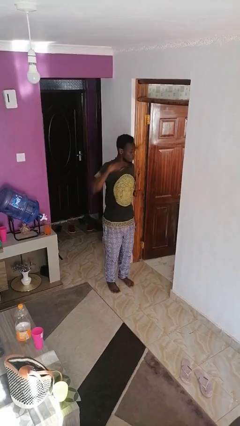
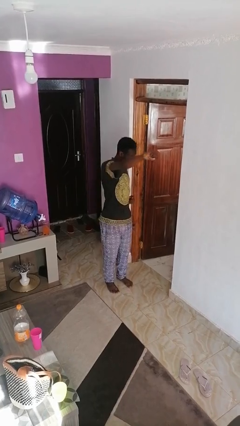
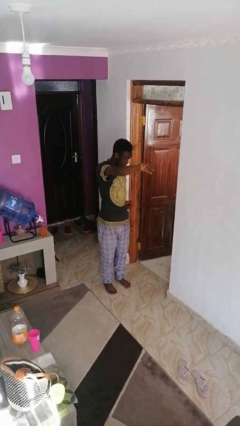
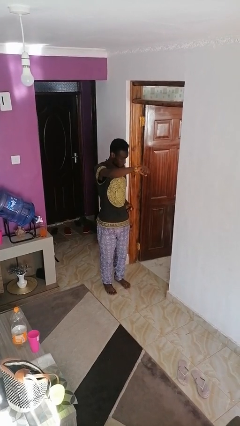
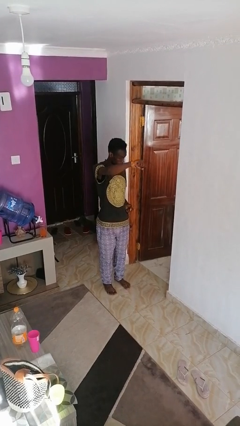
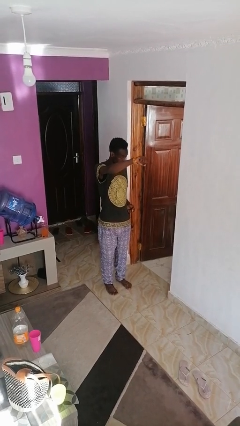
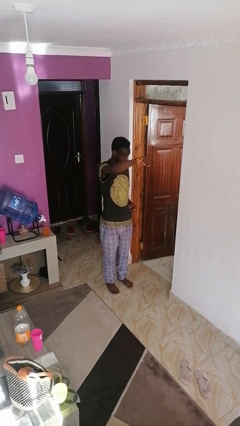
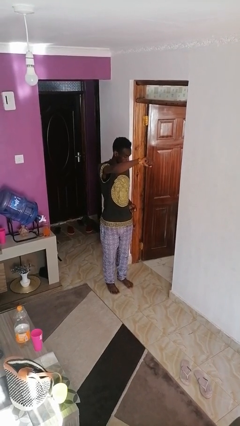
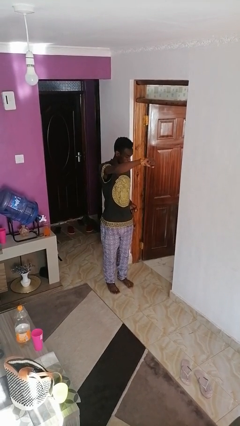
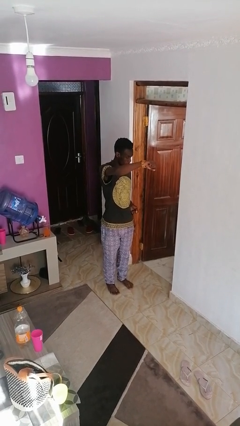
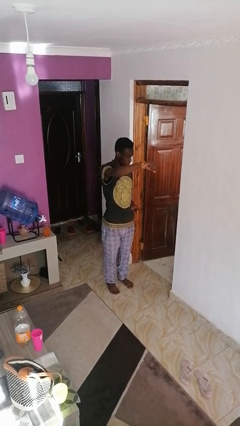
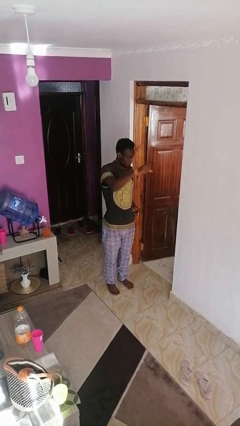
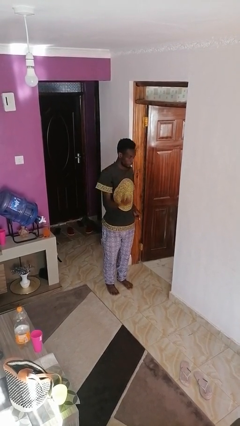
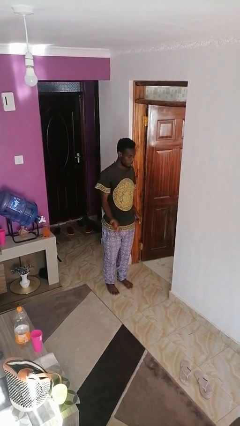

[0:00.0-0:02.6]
person punches

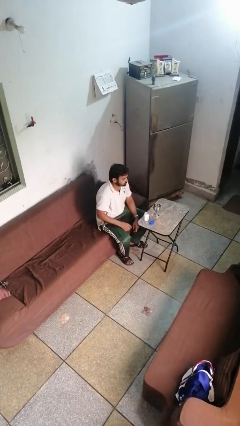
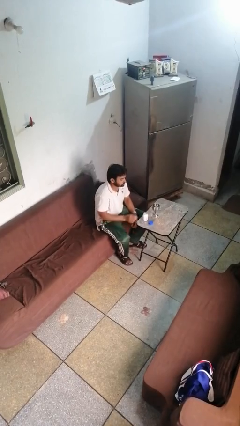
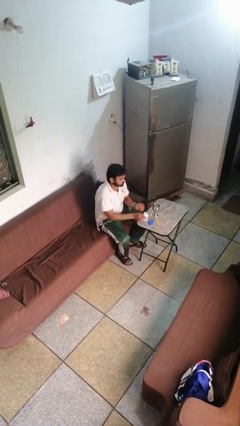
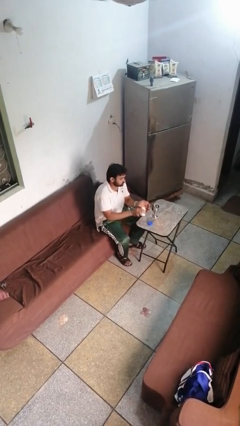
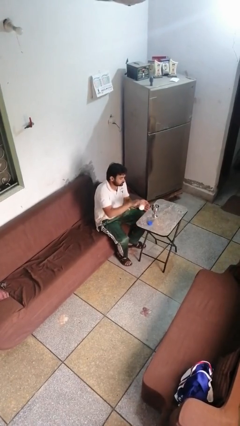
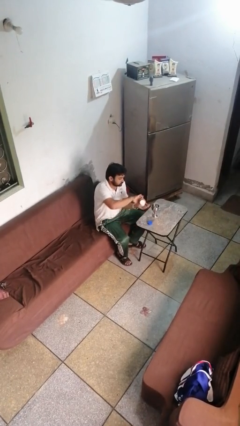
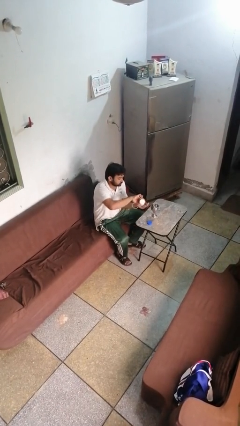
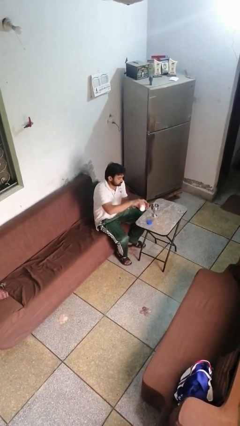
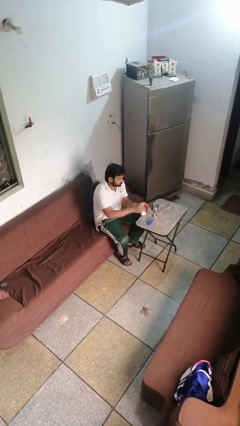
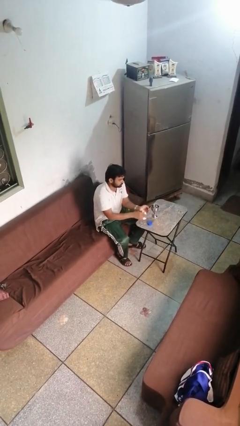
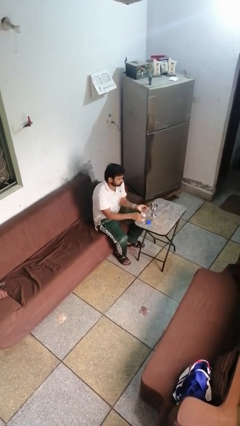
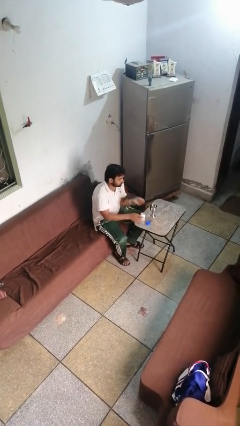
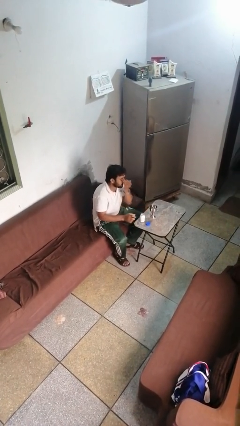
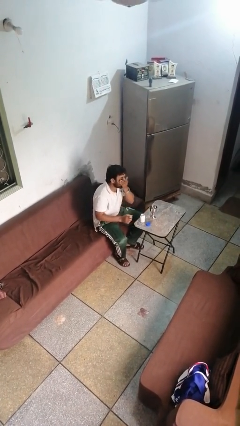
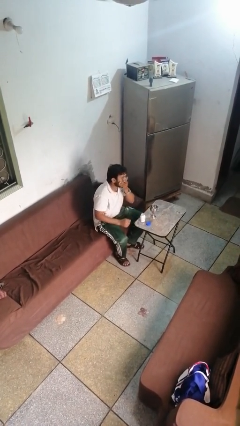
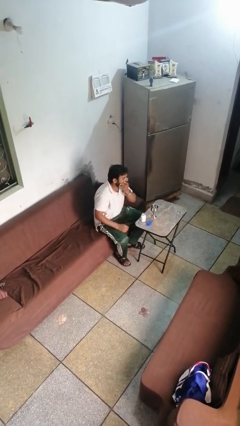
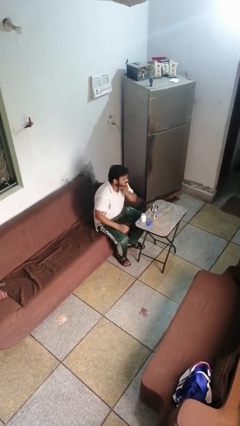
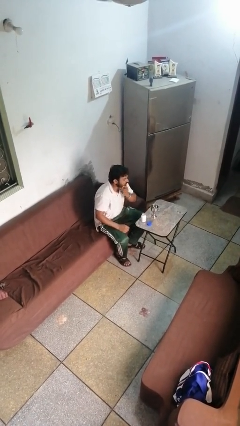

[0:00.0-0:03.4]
person takes medicine pills

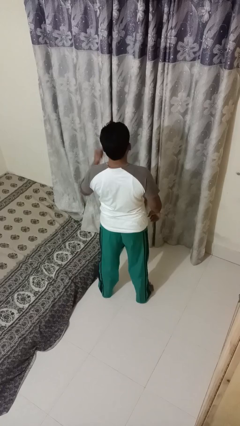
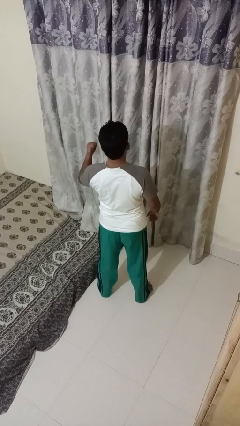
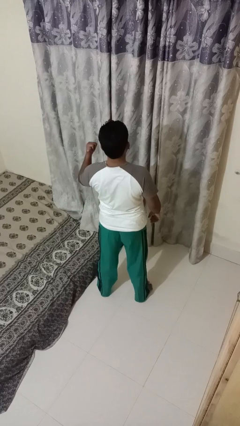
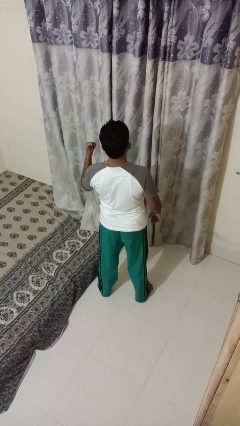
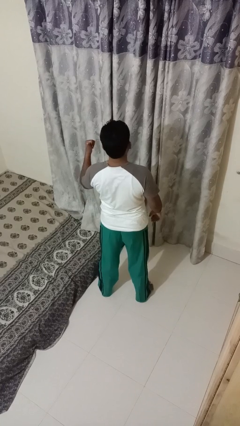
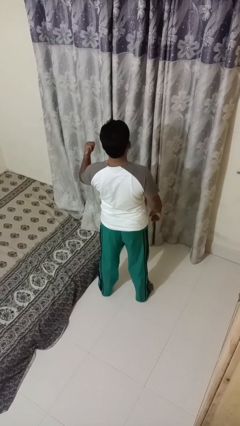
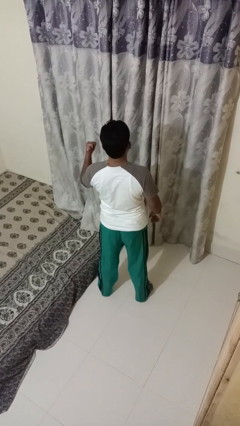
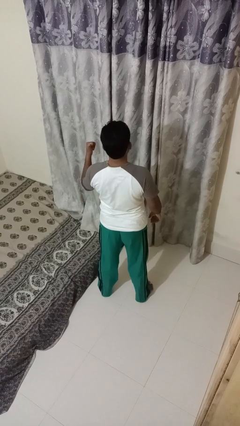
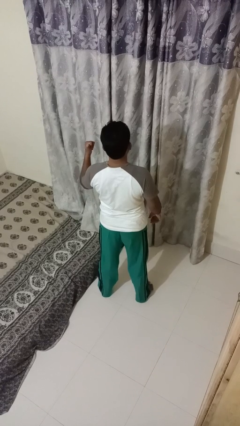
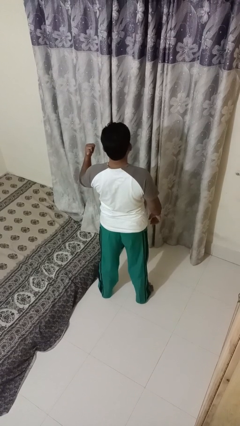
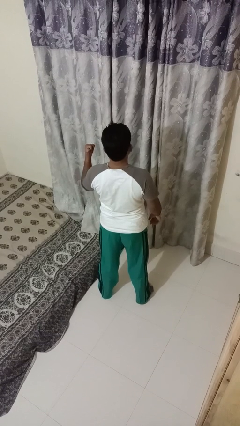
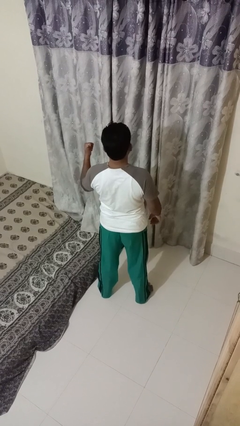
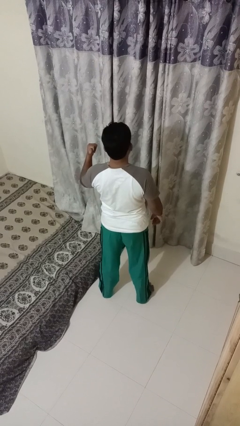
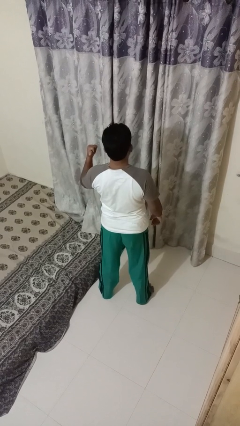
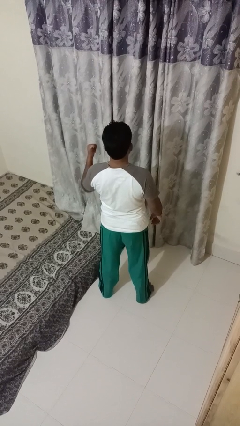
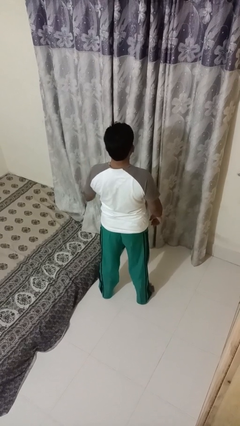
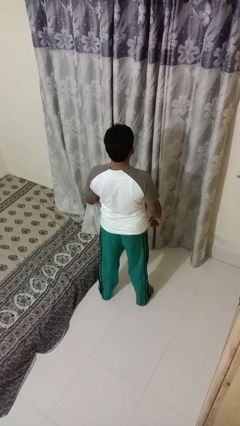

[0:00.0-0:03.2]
person gestures behind me

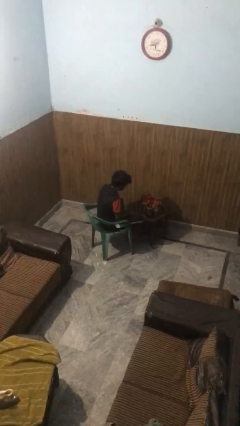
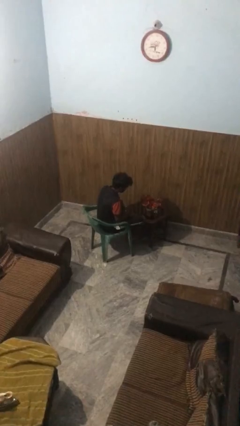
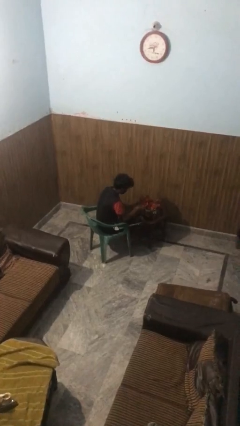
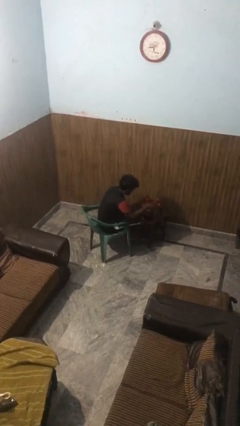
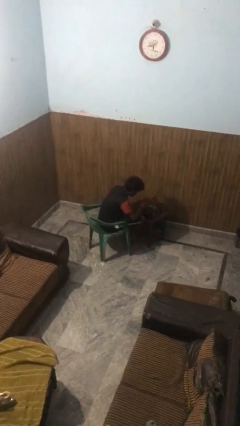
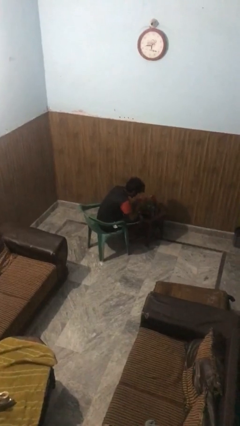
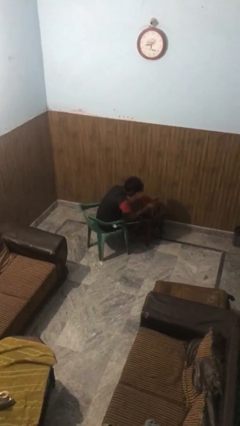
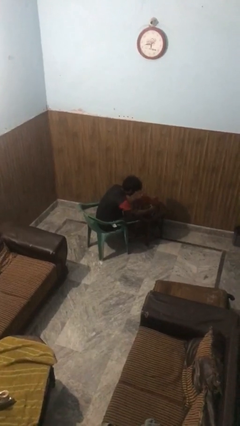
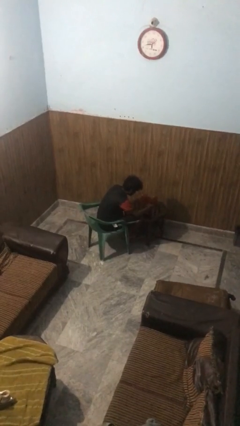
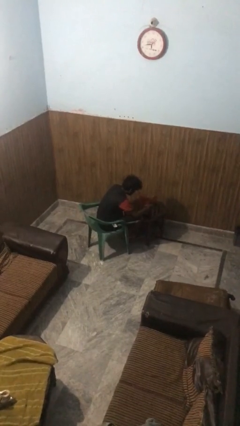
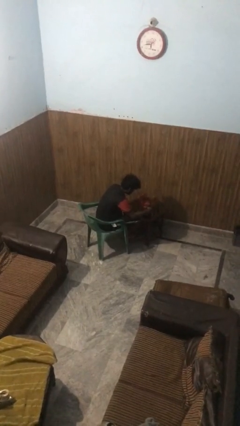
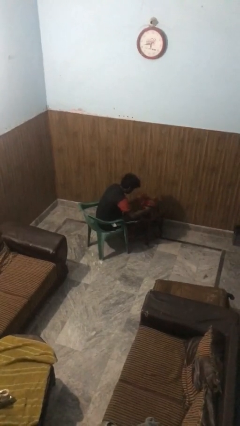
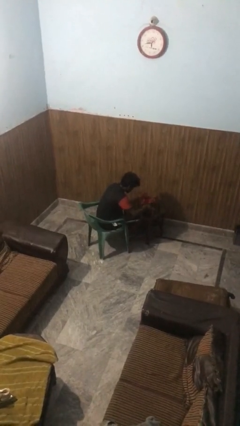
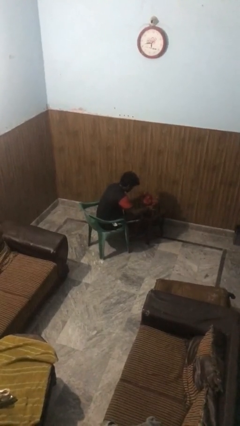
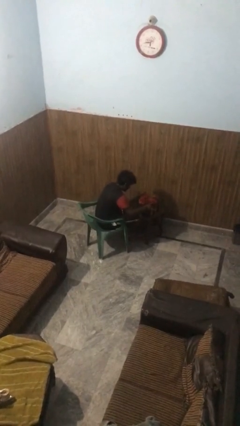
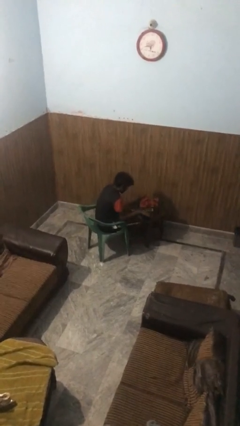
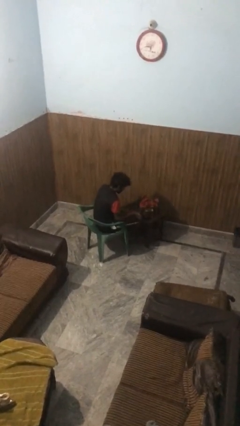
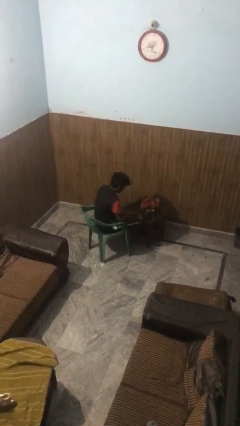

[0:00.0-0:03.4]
person arranges flowers in vase

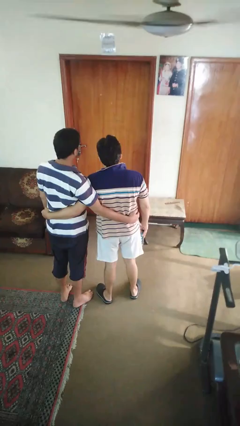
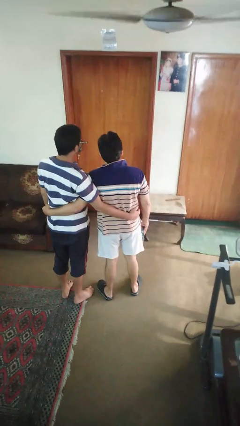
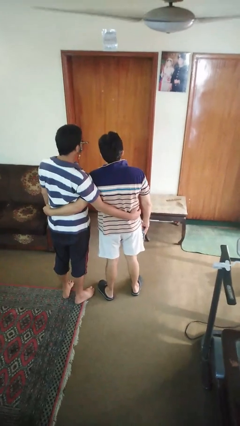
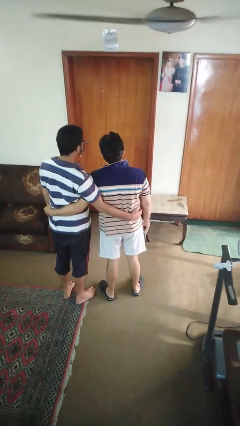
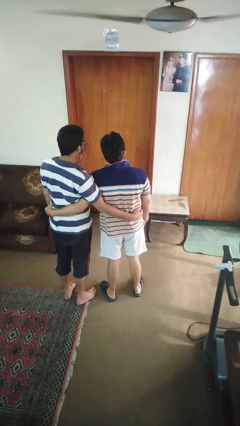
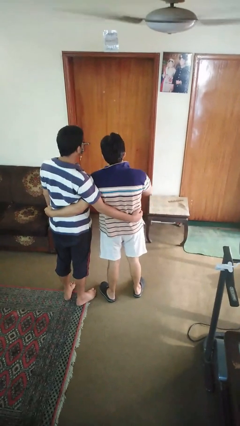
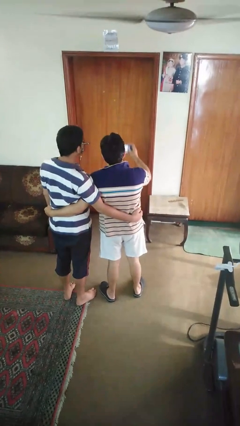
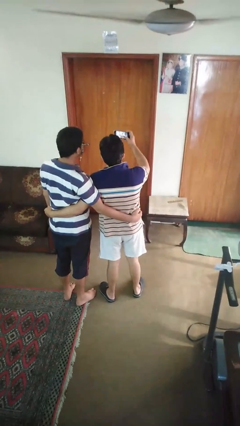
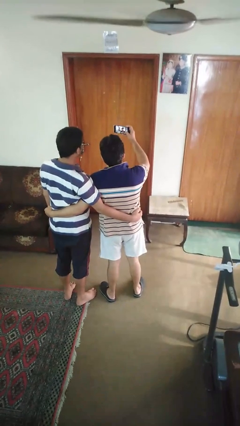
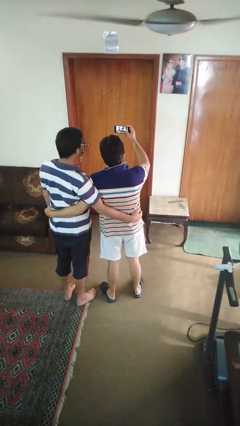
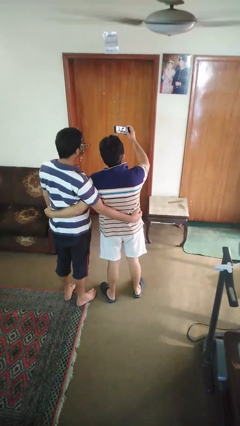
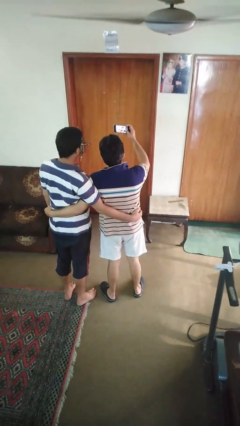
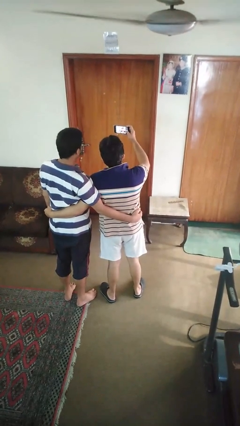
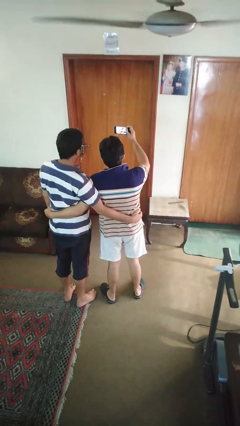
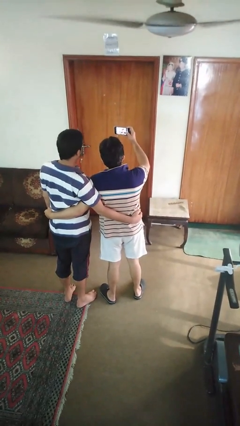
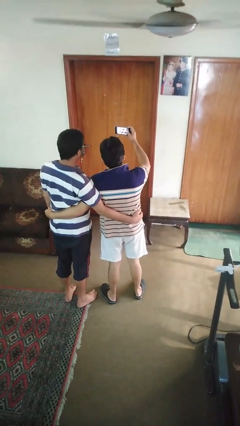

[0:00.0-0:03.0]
person takes selfie with person

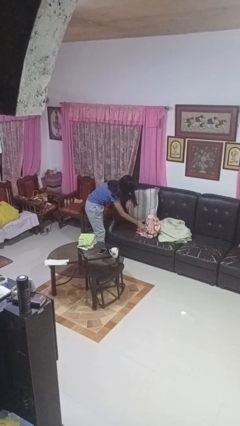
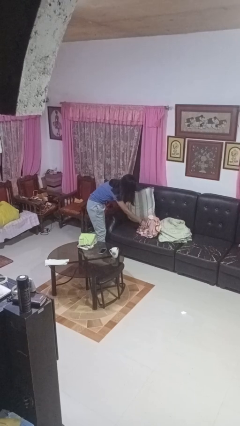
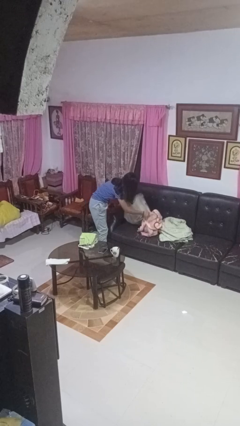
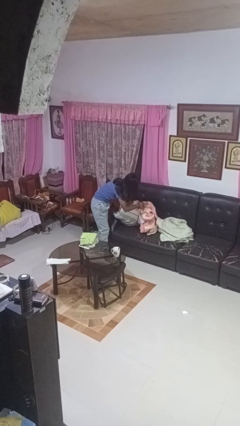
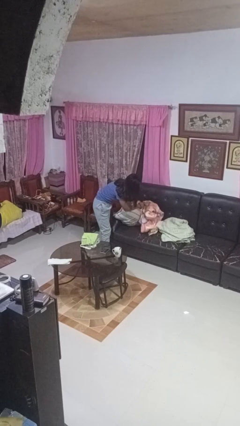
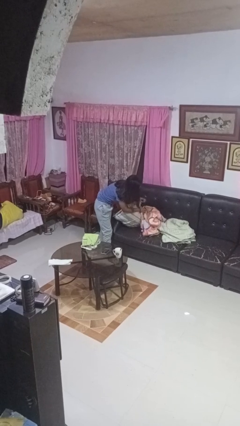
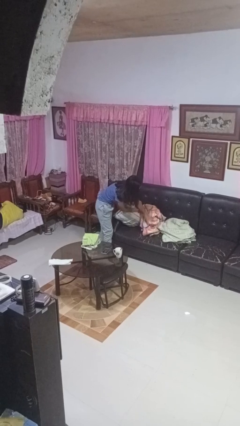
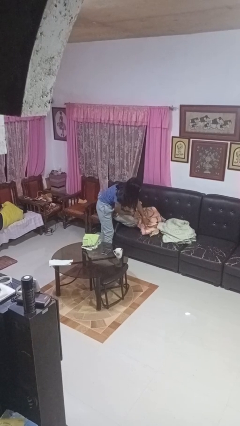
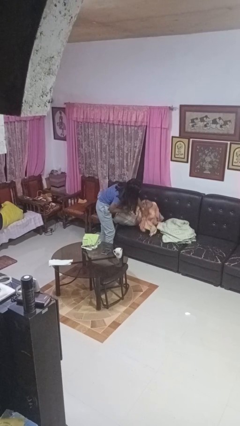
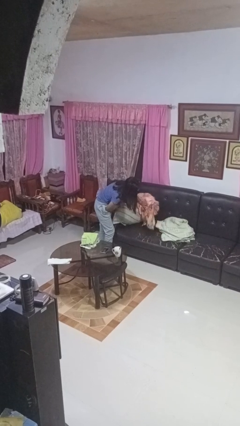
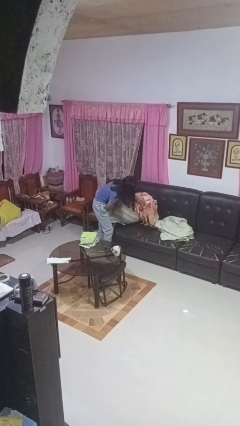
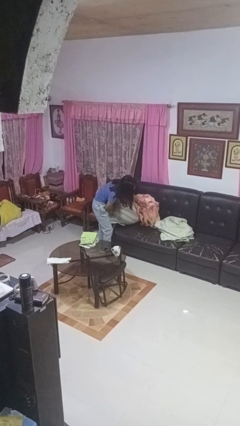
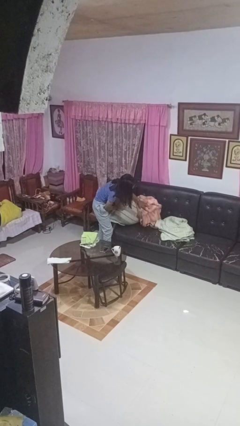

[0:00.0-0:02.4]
person searches in couch
